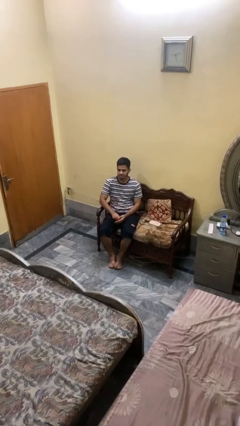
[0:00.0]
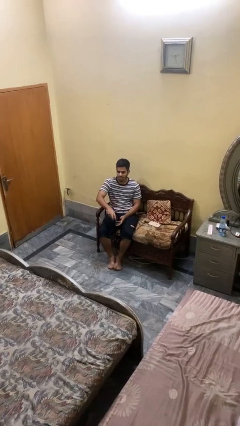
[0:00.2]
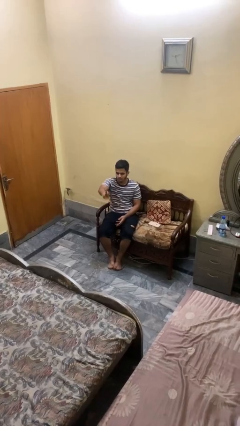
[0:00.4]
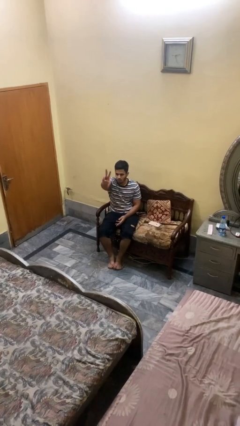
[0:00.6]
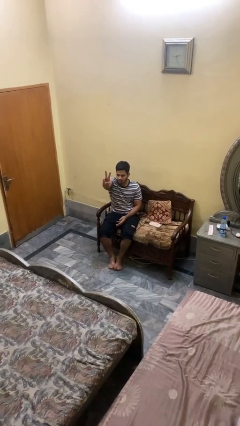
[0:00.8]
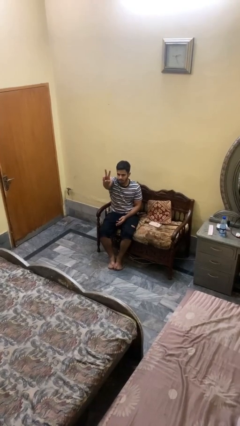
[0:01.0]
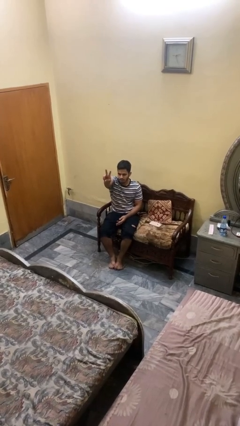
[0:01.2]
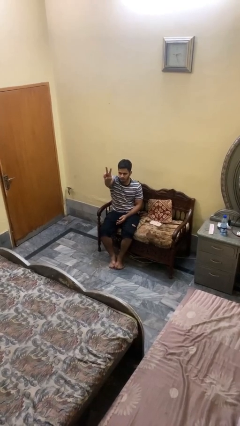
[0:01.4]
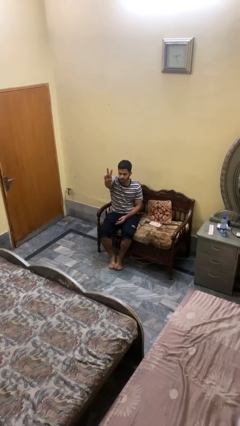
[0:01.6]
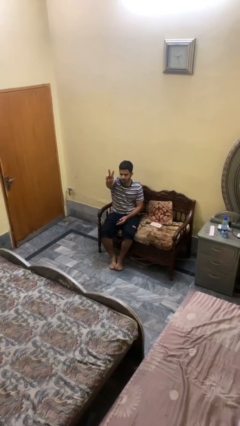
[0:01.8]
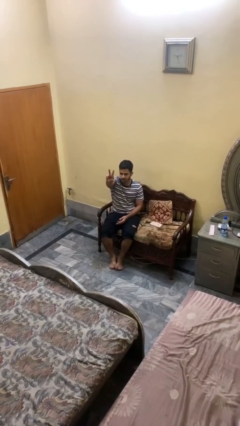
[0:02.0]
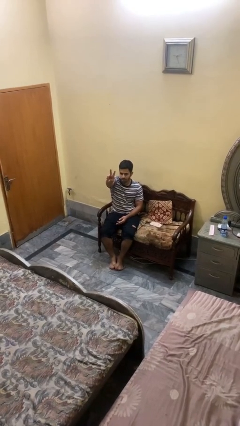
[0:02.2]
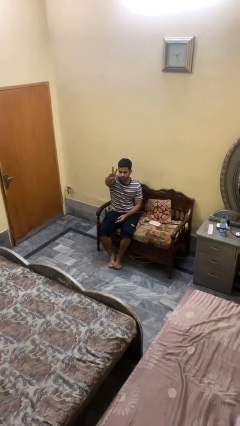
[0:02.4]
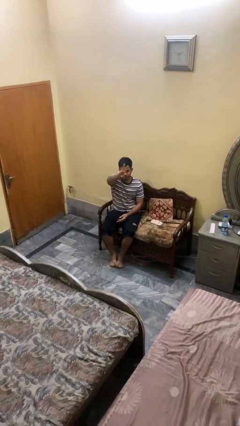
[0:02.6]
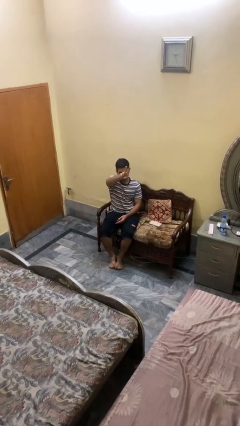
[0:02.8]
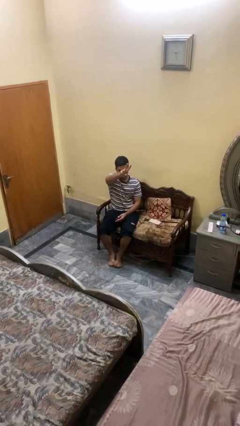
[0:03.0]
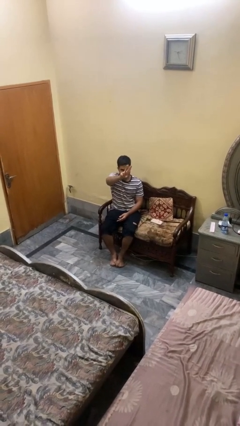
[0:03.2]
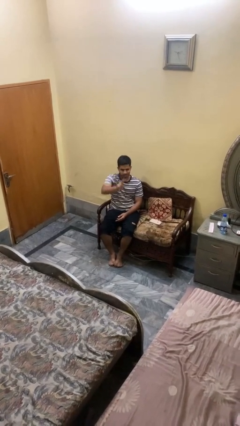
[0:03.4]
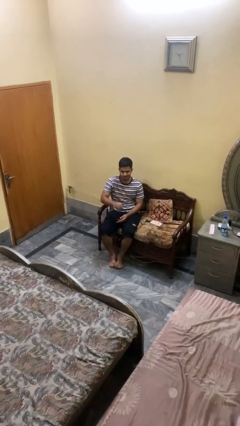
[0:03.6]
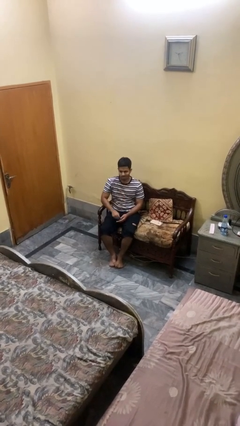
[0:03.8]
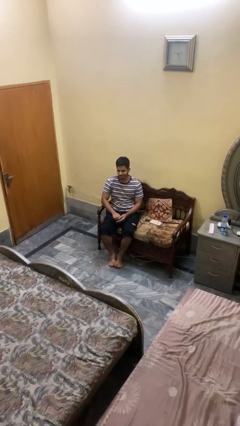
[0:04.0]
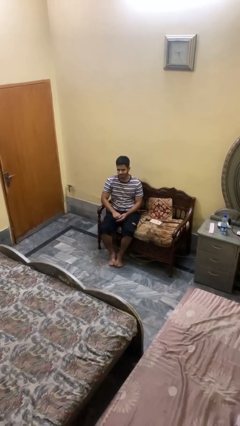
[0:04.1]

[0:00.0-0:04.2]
person gestures peace

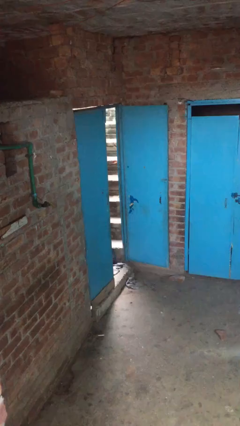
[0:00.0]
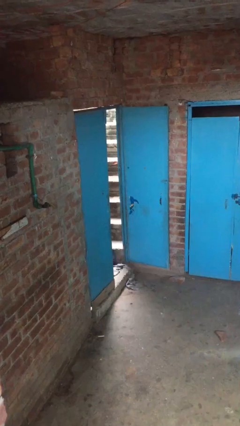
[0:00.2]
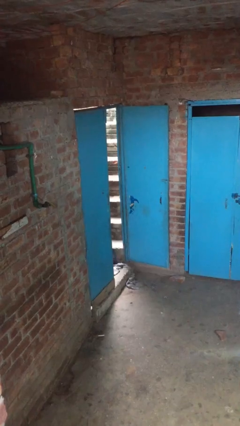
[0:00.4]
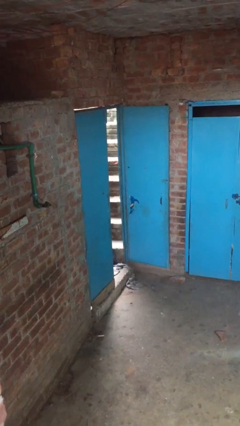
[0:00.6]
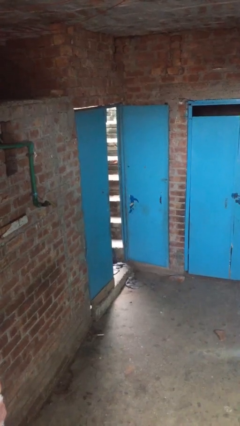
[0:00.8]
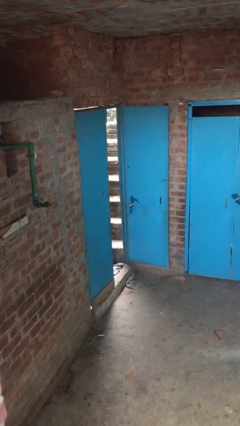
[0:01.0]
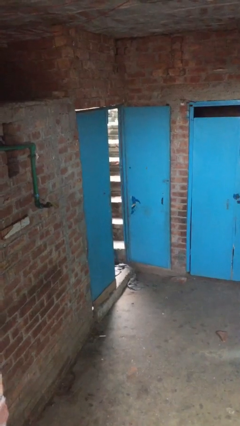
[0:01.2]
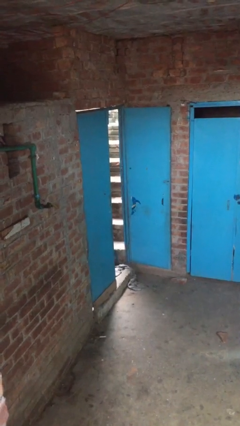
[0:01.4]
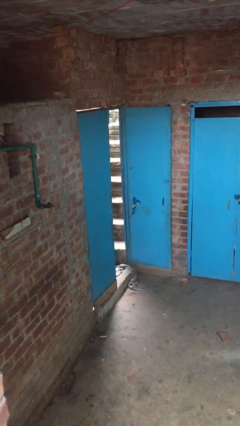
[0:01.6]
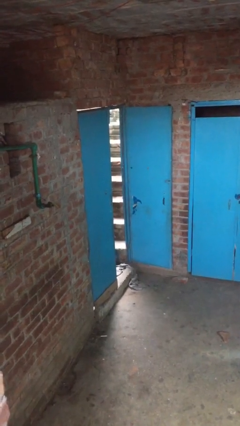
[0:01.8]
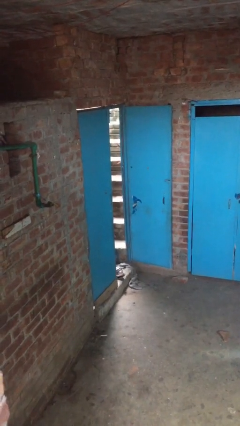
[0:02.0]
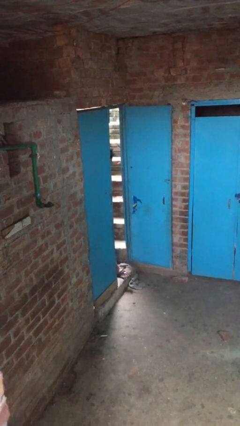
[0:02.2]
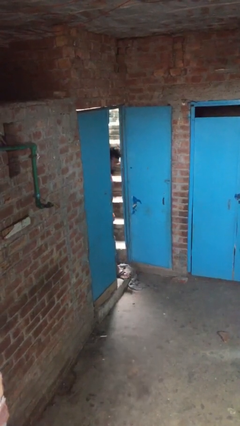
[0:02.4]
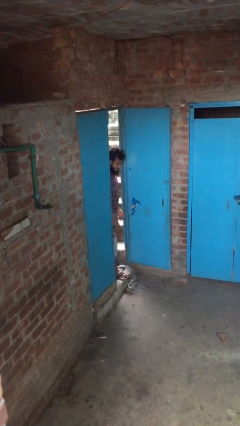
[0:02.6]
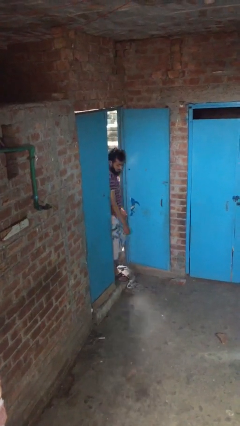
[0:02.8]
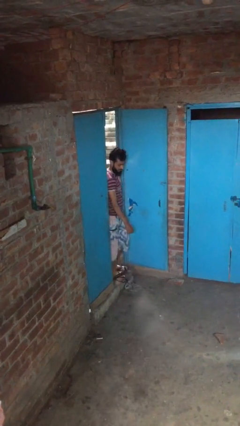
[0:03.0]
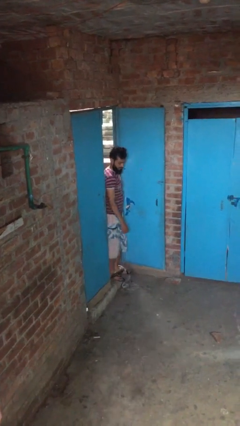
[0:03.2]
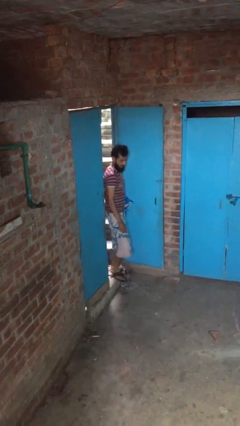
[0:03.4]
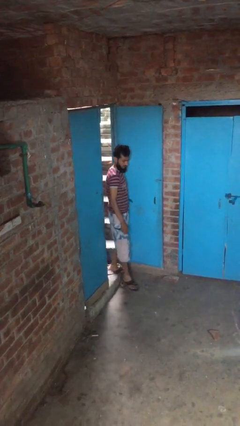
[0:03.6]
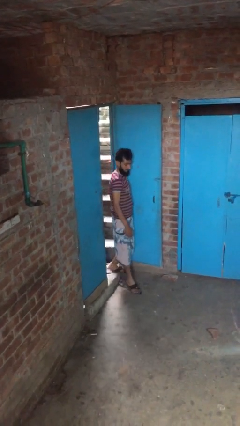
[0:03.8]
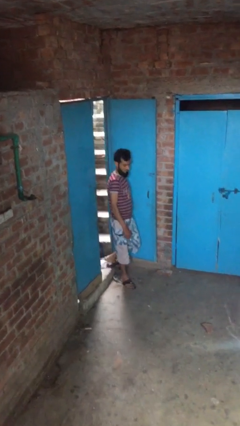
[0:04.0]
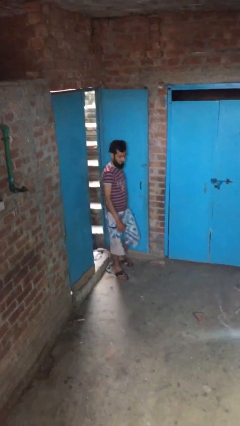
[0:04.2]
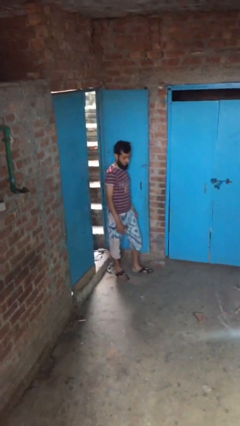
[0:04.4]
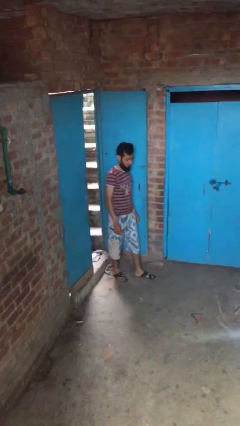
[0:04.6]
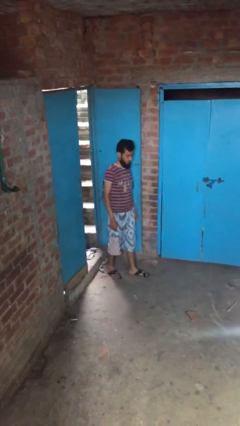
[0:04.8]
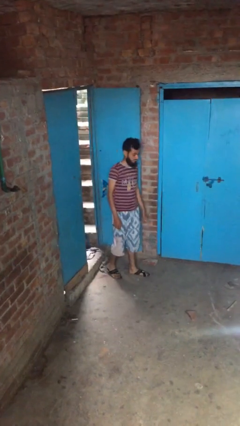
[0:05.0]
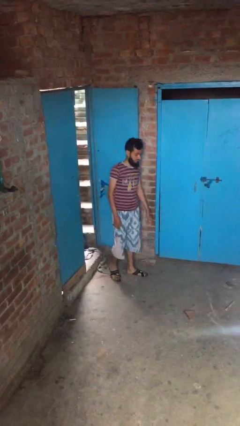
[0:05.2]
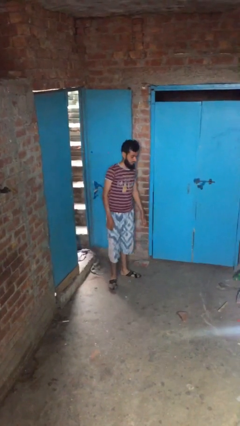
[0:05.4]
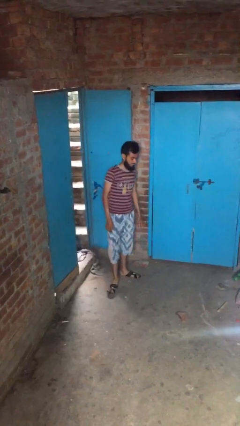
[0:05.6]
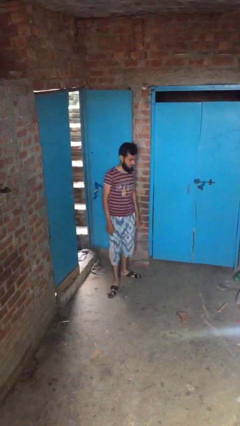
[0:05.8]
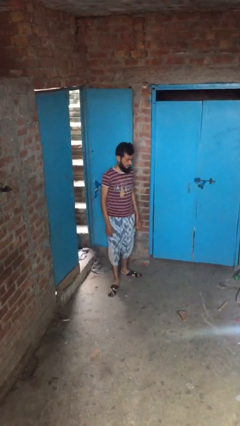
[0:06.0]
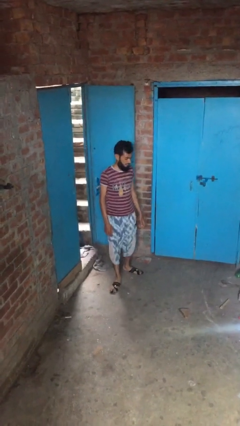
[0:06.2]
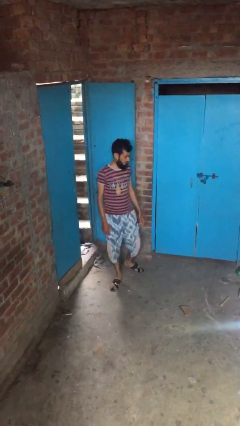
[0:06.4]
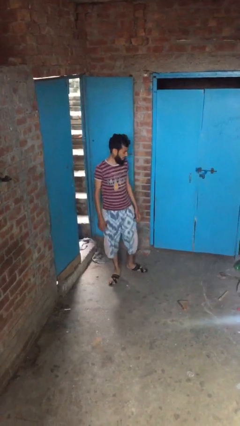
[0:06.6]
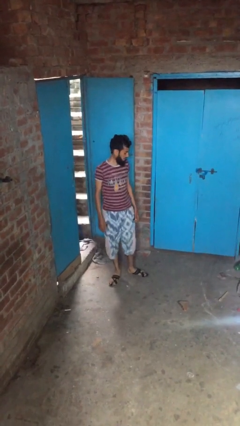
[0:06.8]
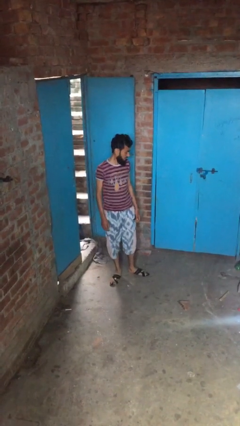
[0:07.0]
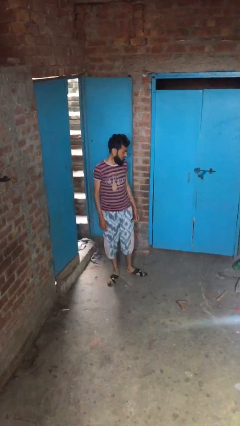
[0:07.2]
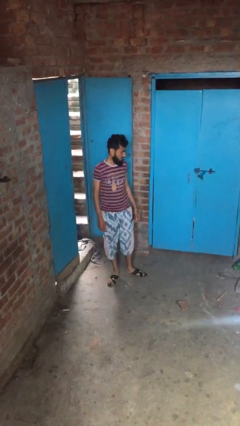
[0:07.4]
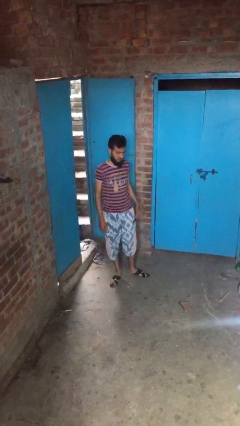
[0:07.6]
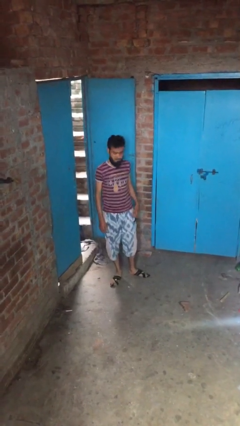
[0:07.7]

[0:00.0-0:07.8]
person enters scene through structure

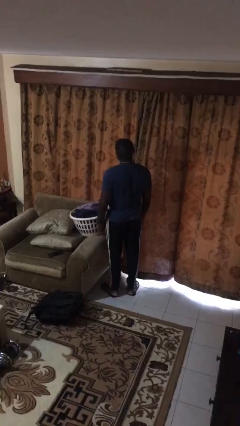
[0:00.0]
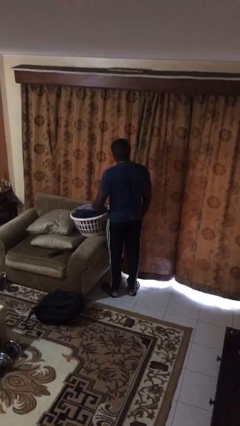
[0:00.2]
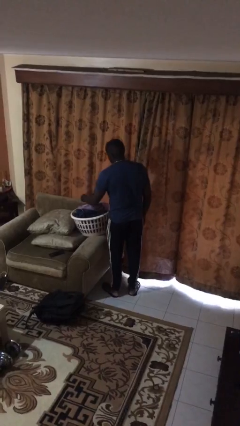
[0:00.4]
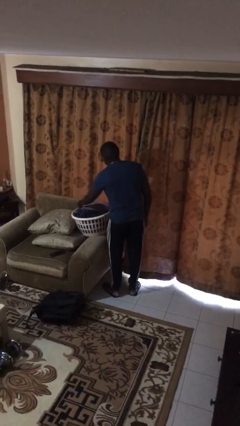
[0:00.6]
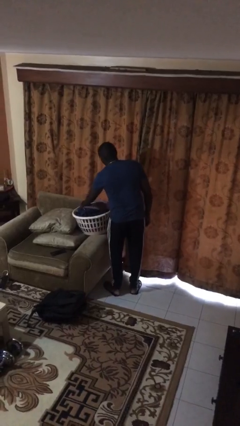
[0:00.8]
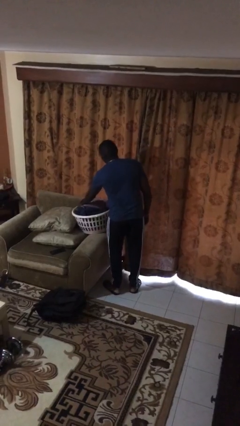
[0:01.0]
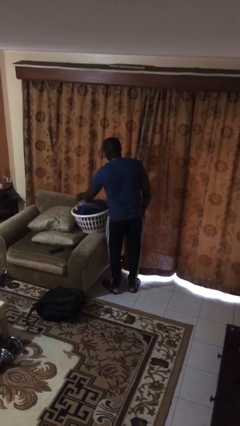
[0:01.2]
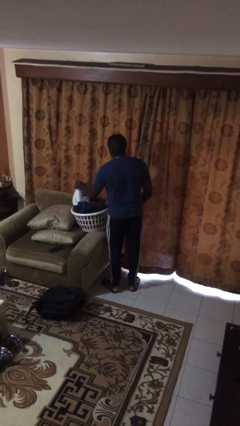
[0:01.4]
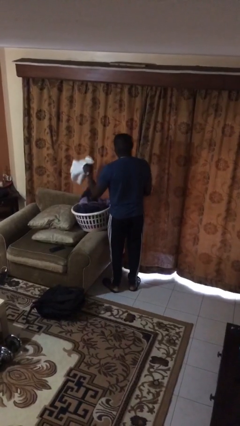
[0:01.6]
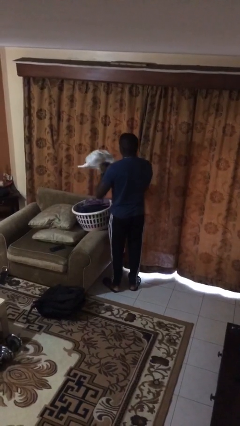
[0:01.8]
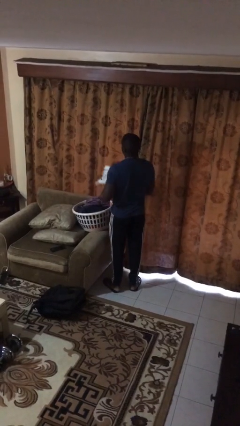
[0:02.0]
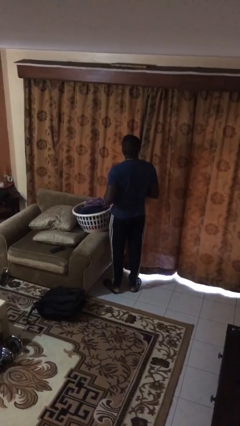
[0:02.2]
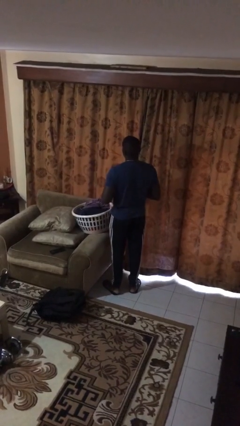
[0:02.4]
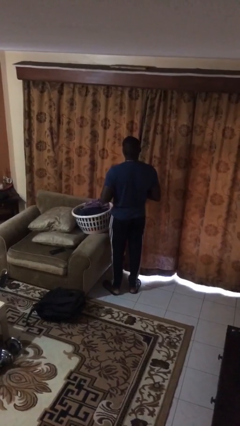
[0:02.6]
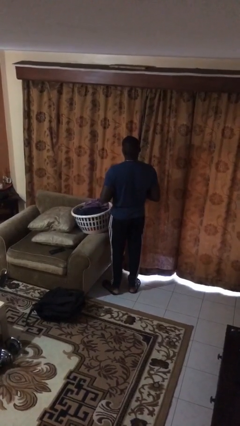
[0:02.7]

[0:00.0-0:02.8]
person takes object from basket

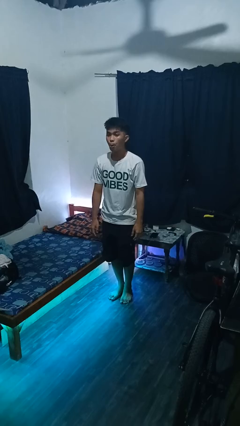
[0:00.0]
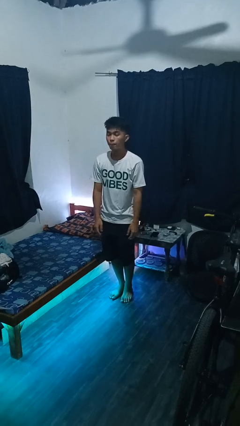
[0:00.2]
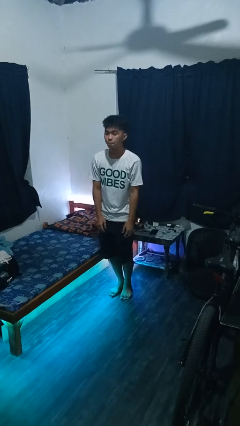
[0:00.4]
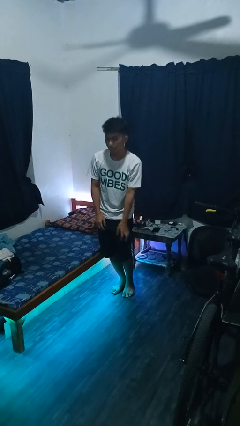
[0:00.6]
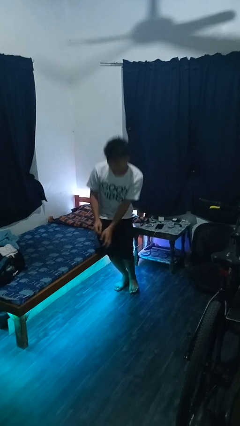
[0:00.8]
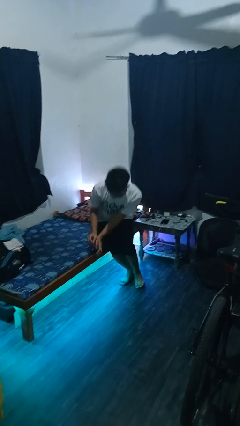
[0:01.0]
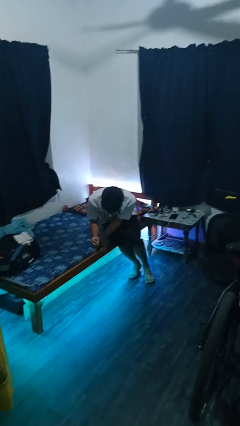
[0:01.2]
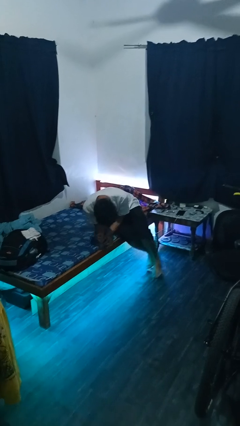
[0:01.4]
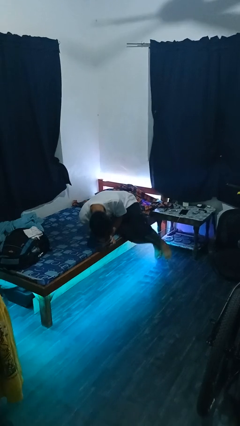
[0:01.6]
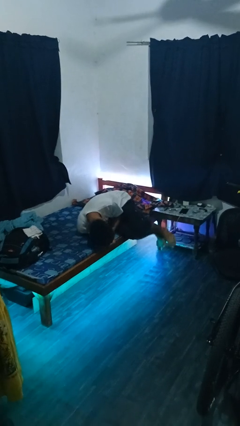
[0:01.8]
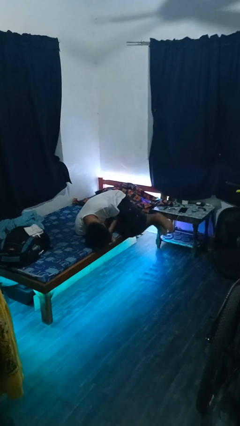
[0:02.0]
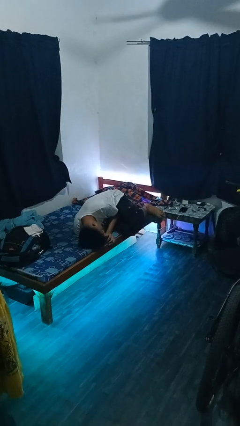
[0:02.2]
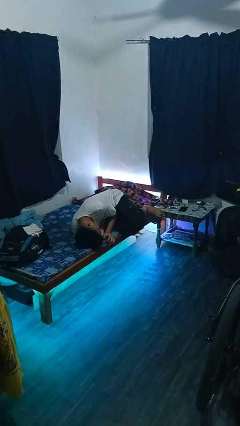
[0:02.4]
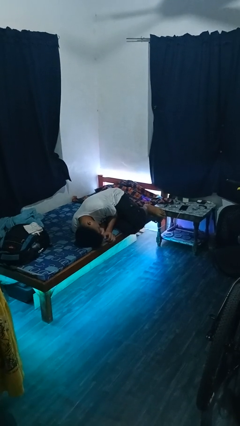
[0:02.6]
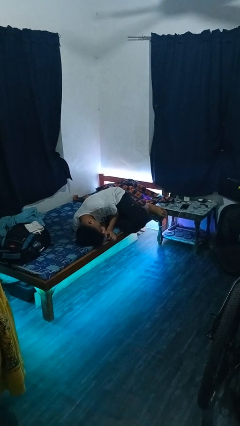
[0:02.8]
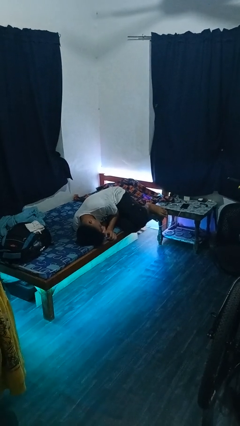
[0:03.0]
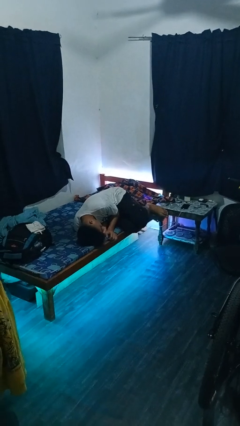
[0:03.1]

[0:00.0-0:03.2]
person lies down on bed
